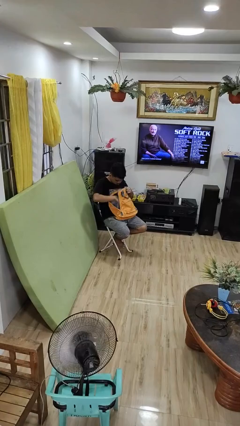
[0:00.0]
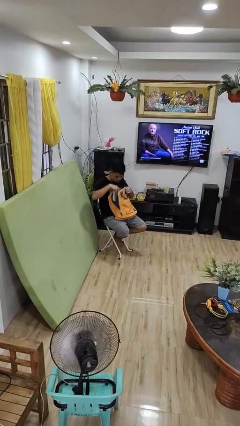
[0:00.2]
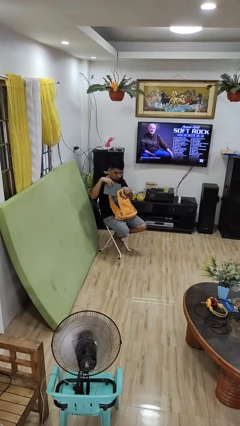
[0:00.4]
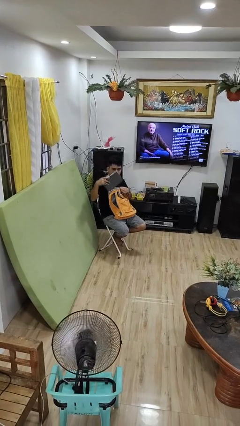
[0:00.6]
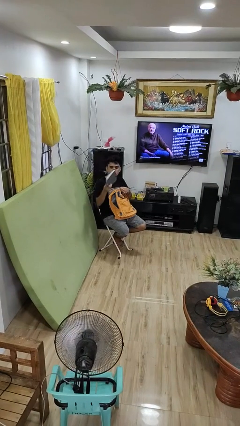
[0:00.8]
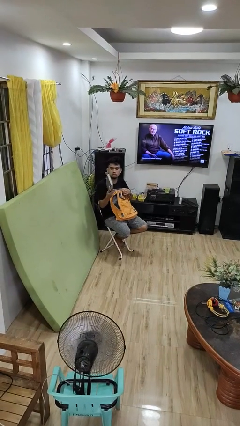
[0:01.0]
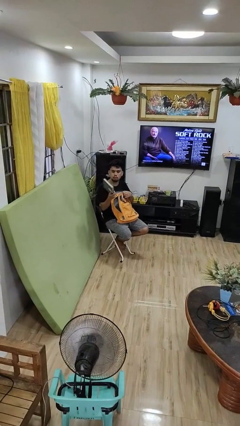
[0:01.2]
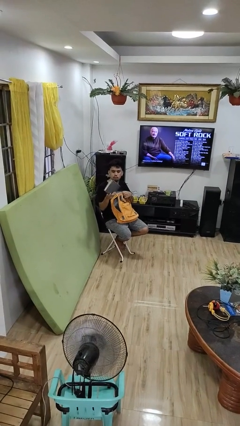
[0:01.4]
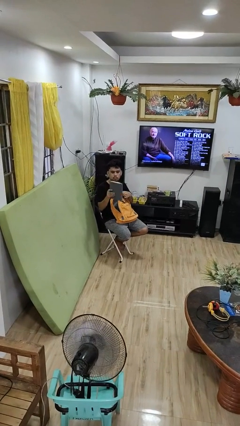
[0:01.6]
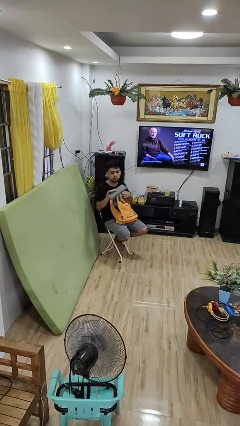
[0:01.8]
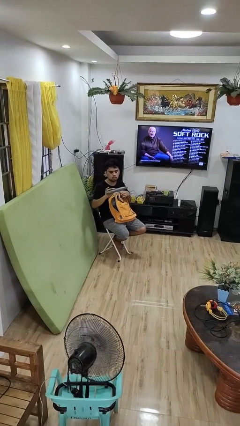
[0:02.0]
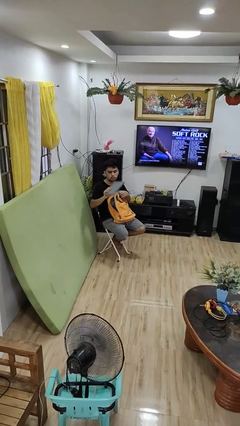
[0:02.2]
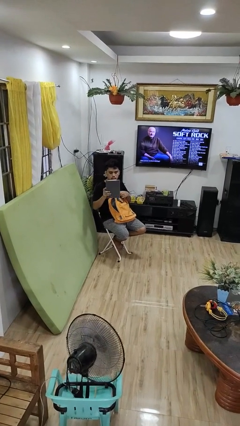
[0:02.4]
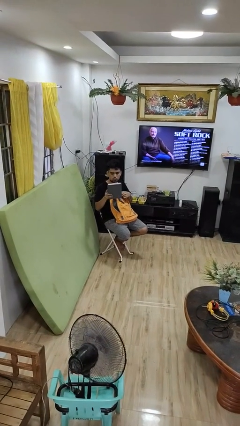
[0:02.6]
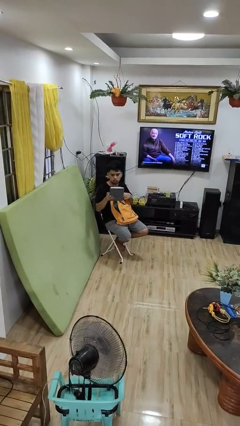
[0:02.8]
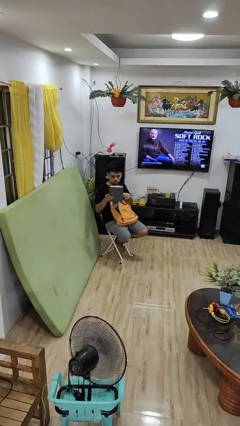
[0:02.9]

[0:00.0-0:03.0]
person takes object from backpack

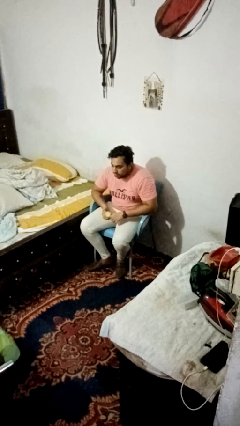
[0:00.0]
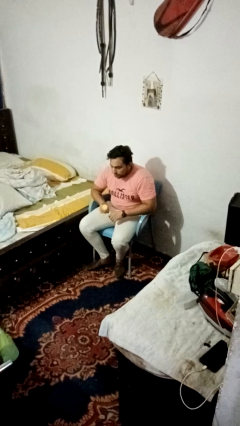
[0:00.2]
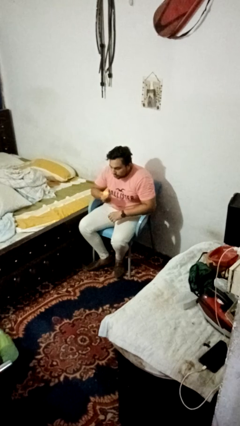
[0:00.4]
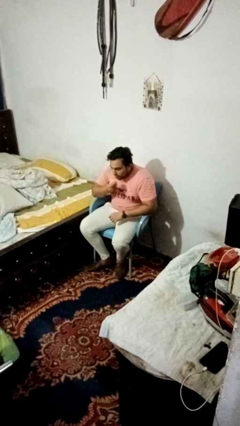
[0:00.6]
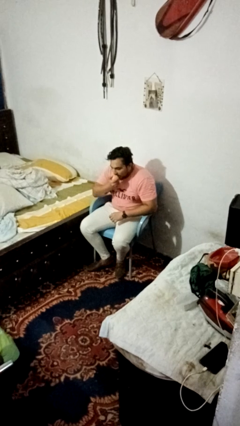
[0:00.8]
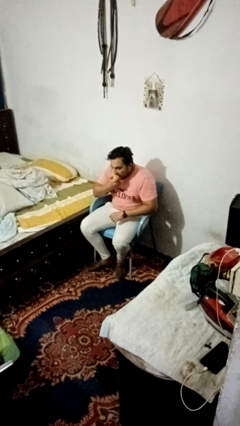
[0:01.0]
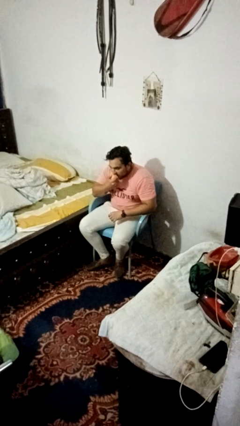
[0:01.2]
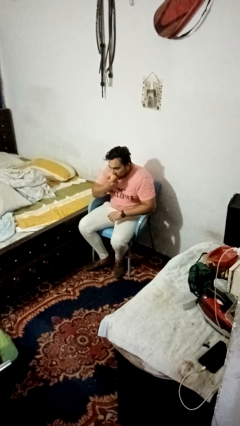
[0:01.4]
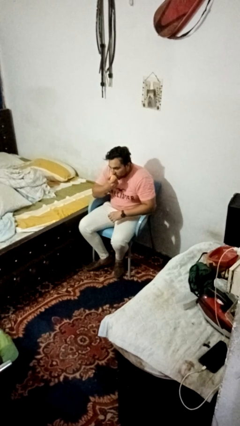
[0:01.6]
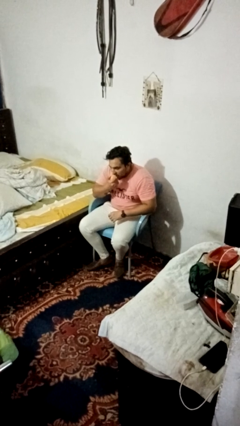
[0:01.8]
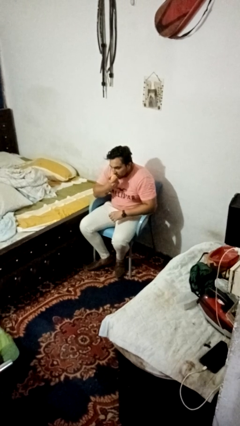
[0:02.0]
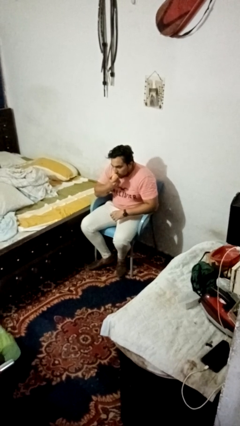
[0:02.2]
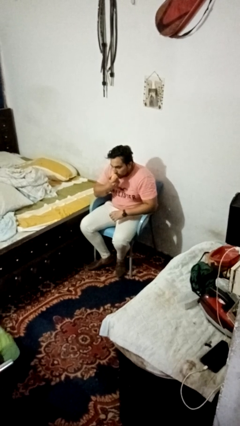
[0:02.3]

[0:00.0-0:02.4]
person eats apple

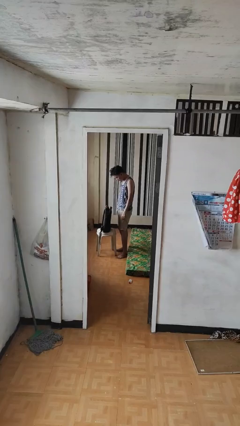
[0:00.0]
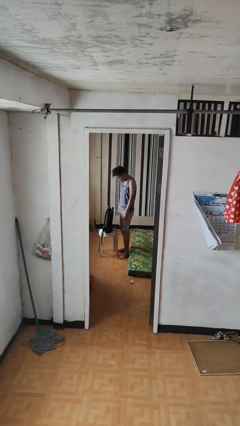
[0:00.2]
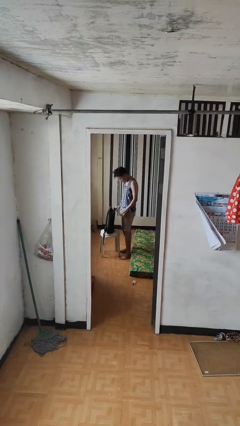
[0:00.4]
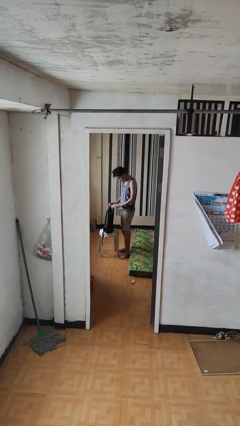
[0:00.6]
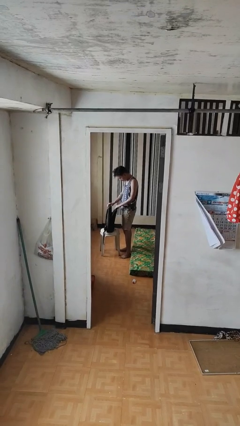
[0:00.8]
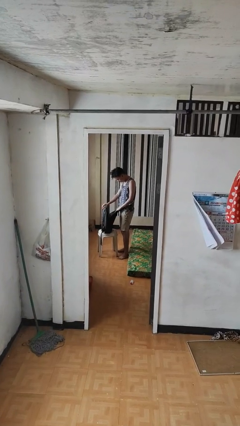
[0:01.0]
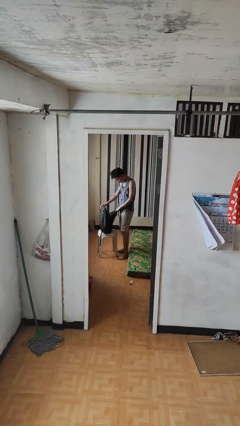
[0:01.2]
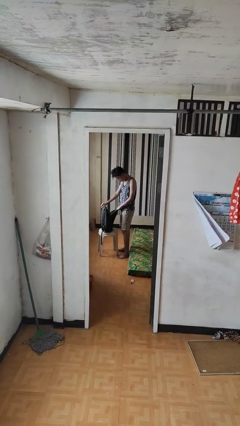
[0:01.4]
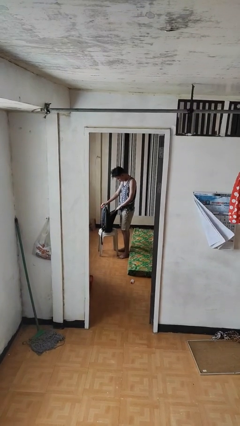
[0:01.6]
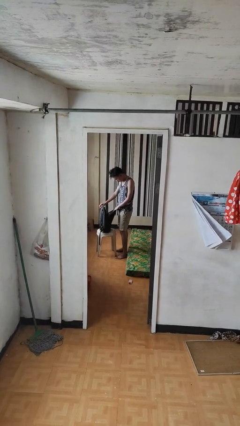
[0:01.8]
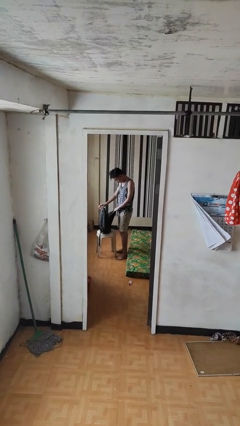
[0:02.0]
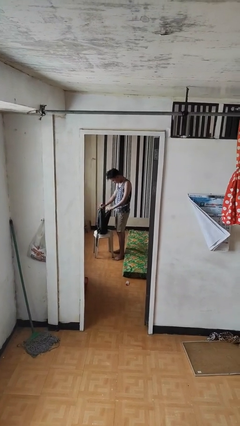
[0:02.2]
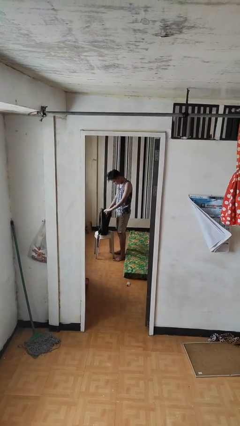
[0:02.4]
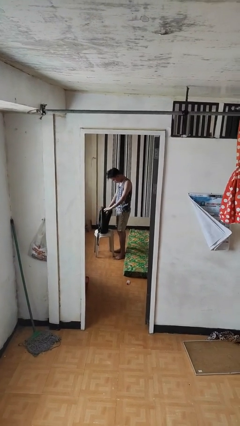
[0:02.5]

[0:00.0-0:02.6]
person searches in backpack

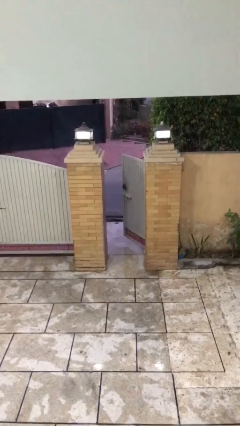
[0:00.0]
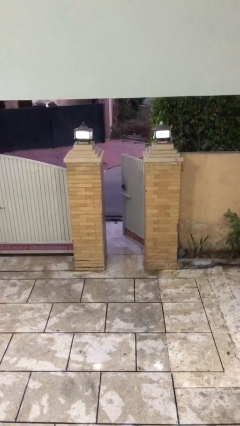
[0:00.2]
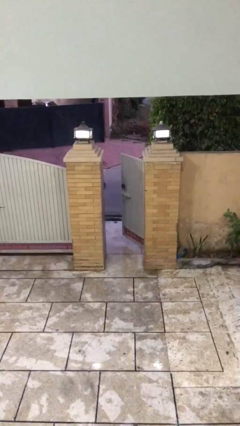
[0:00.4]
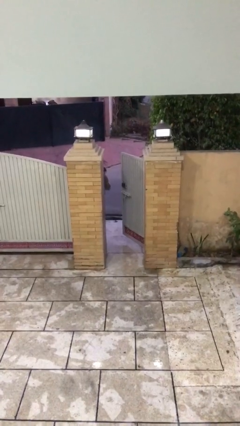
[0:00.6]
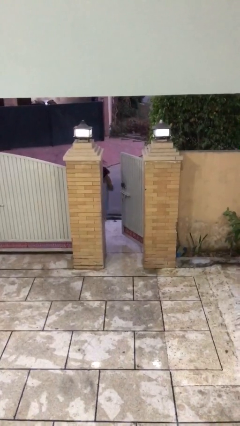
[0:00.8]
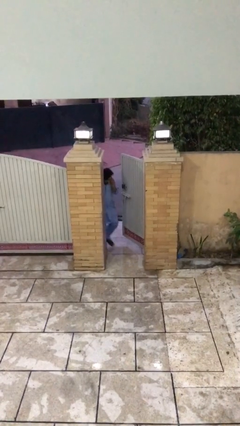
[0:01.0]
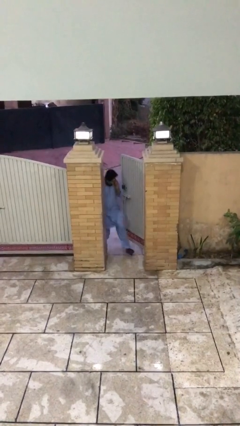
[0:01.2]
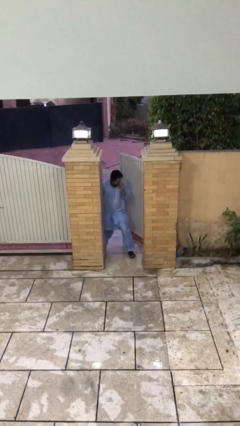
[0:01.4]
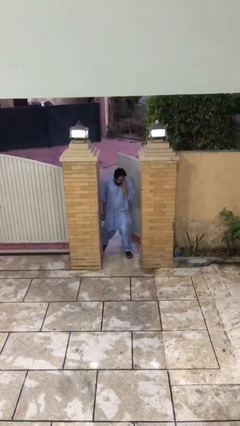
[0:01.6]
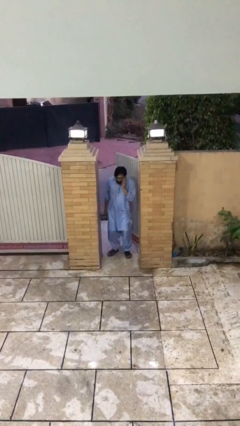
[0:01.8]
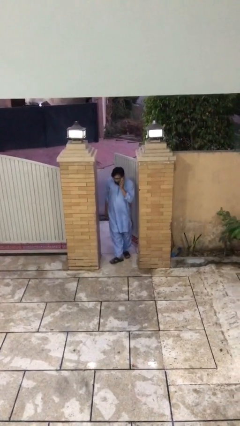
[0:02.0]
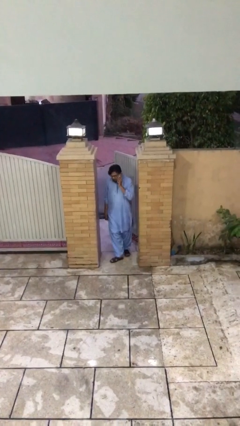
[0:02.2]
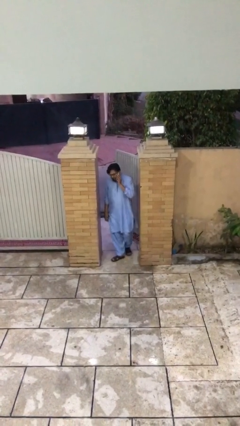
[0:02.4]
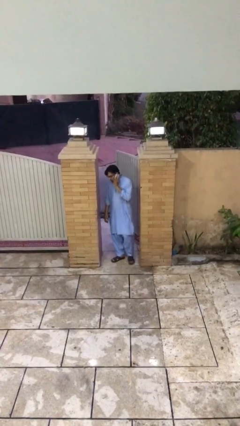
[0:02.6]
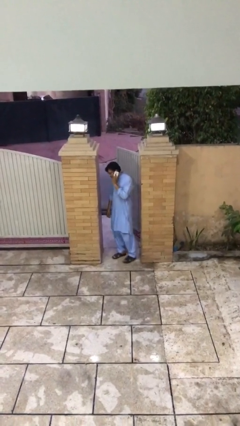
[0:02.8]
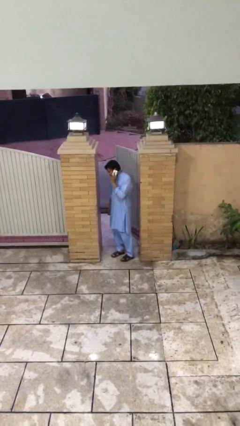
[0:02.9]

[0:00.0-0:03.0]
person enters scene through structure

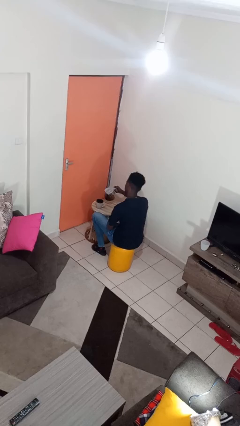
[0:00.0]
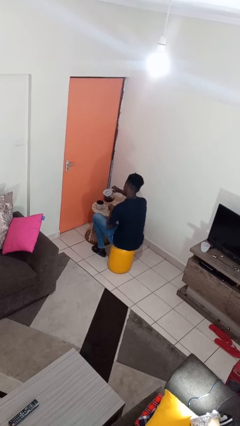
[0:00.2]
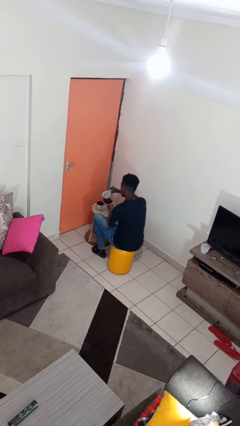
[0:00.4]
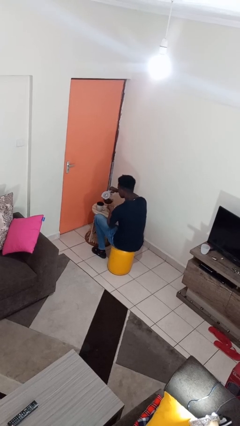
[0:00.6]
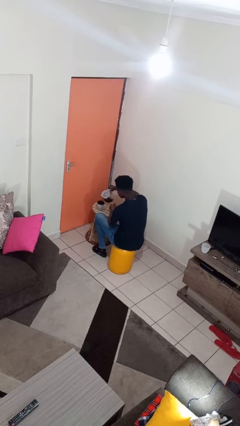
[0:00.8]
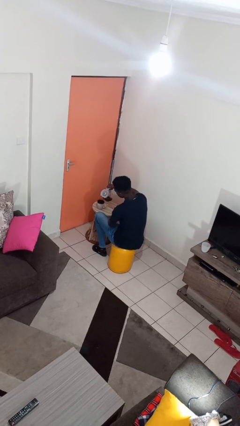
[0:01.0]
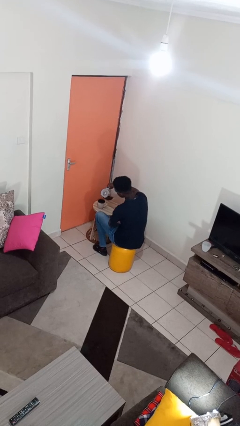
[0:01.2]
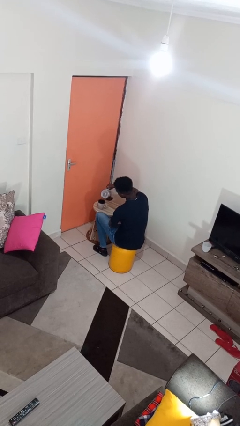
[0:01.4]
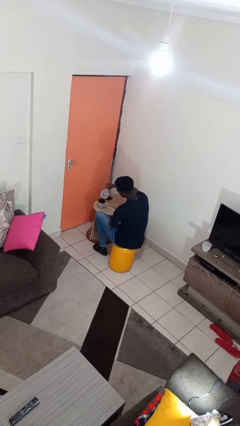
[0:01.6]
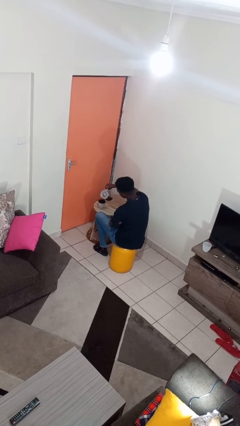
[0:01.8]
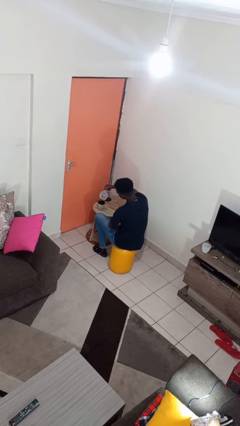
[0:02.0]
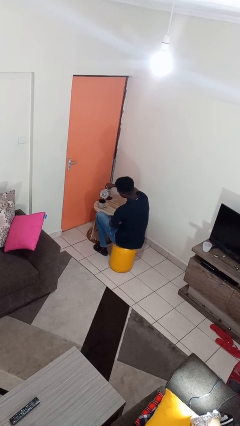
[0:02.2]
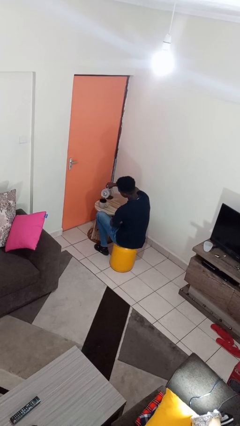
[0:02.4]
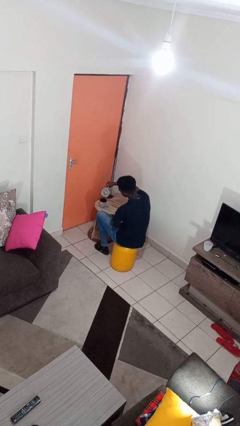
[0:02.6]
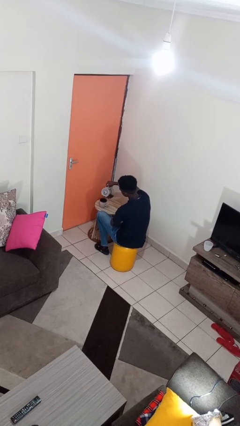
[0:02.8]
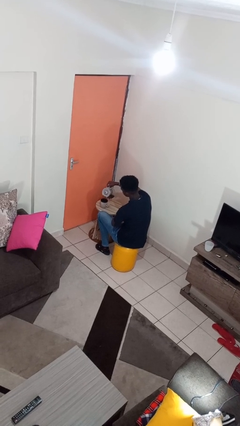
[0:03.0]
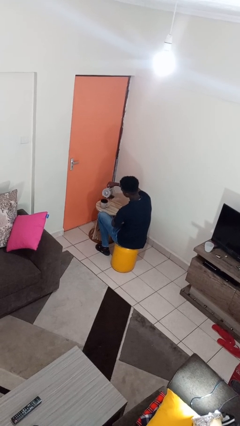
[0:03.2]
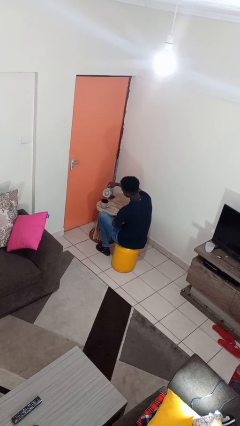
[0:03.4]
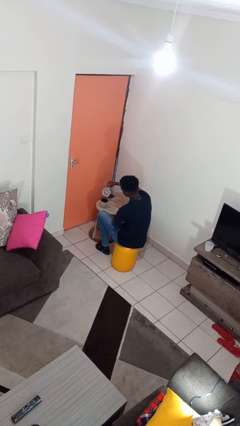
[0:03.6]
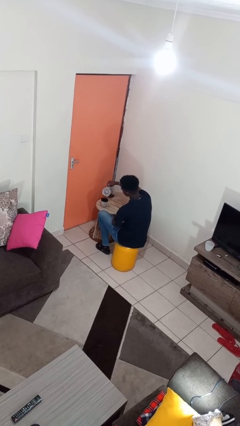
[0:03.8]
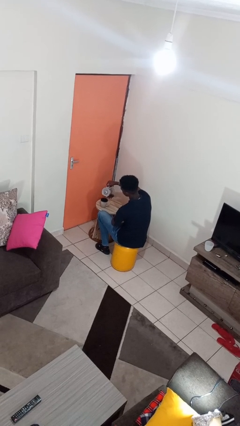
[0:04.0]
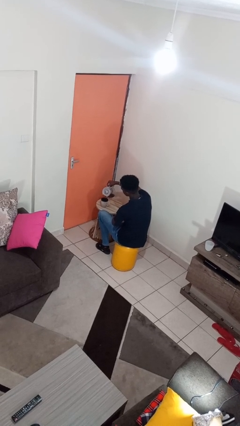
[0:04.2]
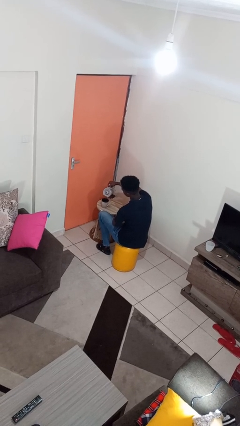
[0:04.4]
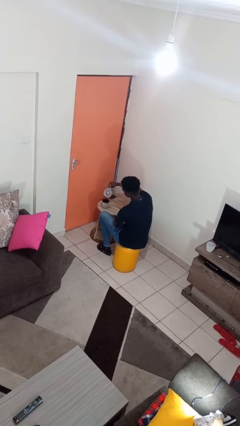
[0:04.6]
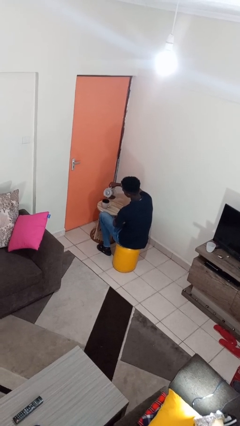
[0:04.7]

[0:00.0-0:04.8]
person pours coffee into mug

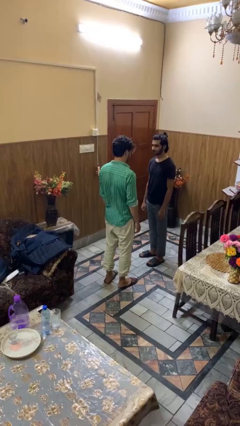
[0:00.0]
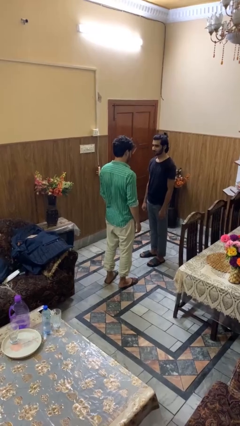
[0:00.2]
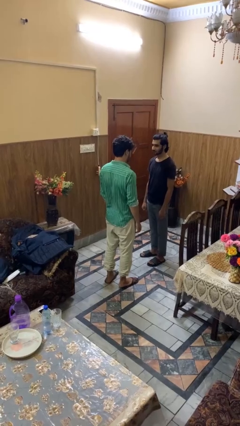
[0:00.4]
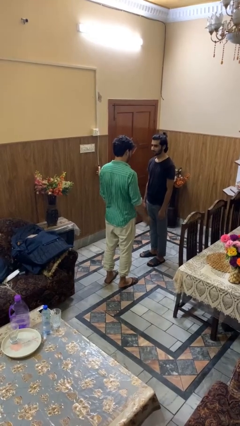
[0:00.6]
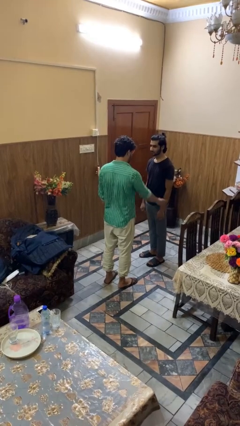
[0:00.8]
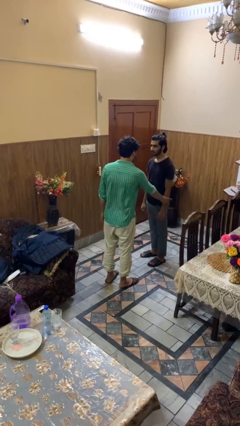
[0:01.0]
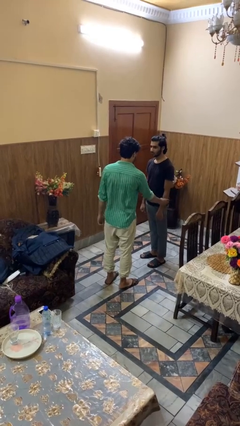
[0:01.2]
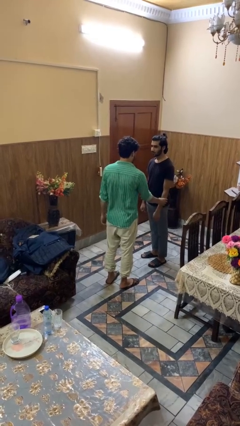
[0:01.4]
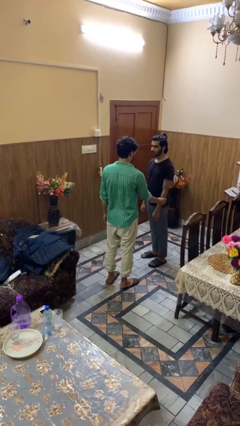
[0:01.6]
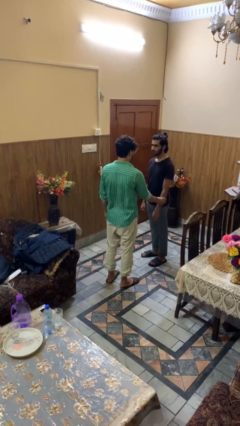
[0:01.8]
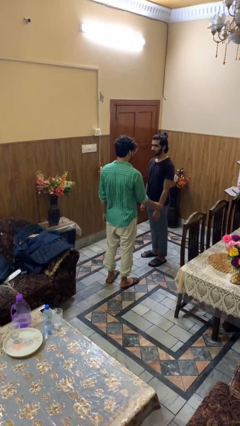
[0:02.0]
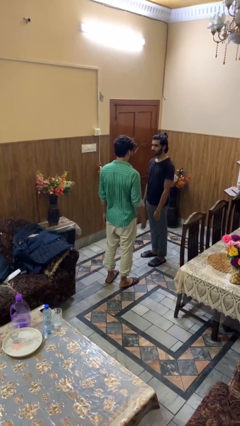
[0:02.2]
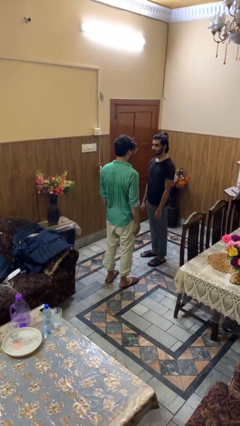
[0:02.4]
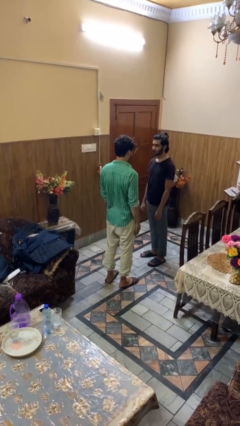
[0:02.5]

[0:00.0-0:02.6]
person grabs person by forearm
